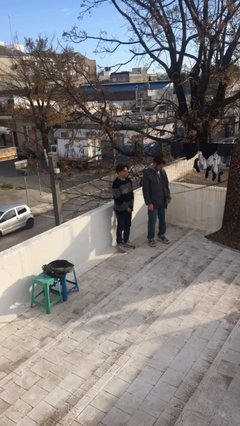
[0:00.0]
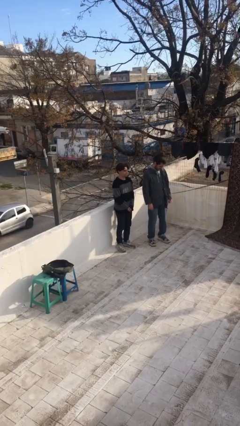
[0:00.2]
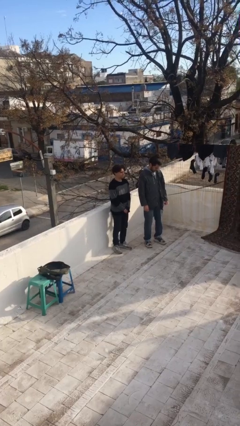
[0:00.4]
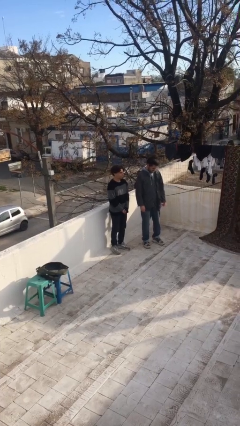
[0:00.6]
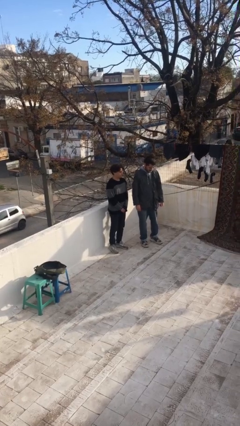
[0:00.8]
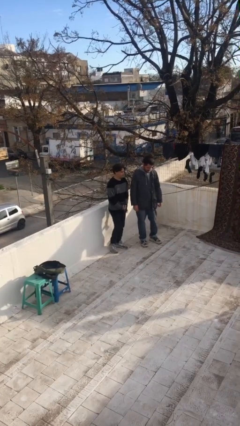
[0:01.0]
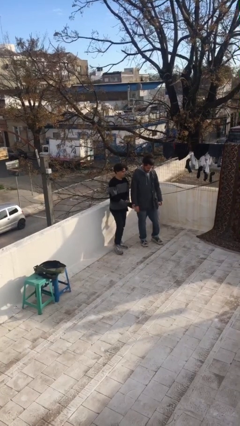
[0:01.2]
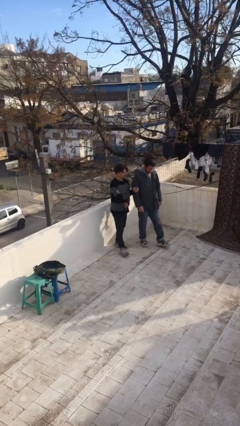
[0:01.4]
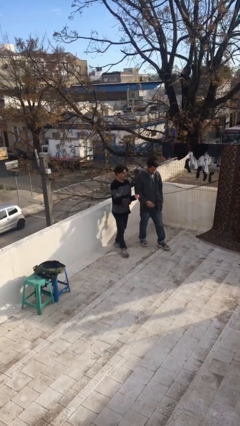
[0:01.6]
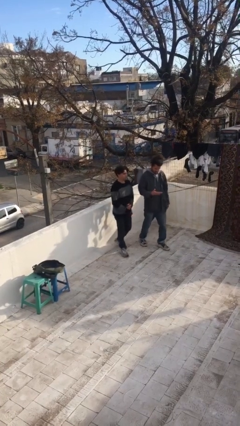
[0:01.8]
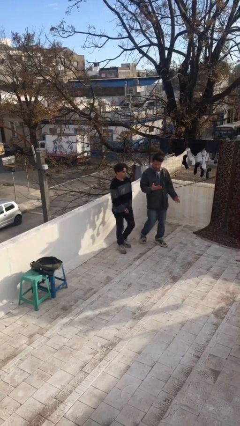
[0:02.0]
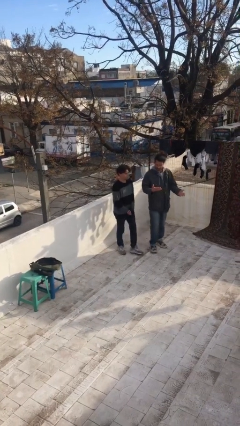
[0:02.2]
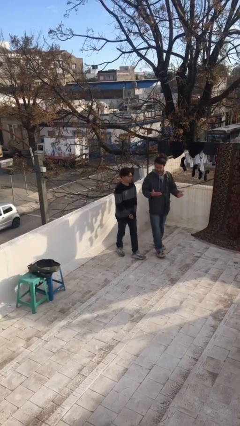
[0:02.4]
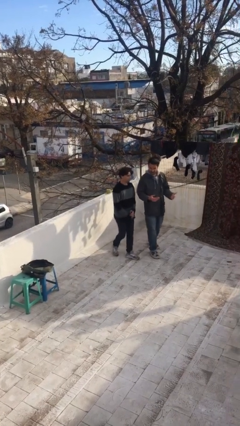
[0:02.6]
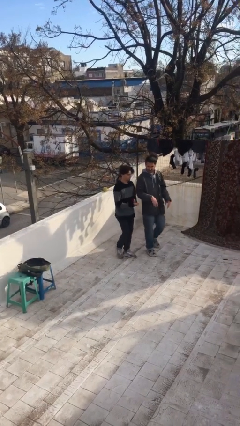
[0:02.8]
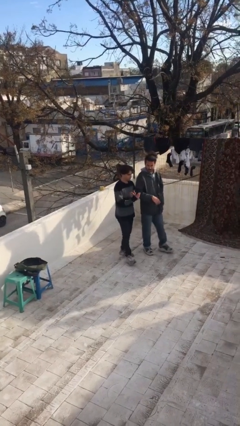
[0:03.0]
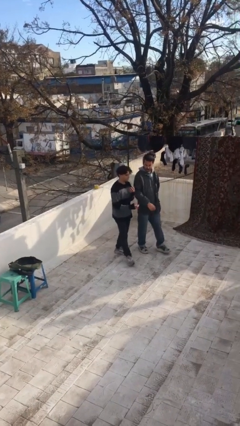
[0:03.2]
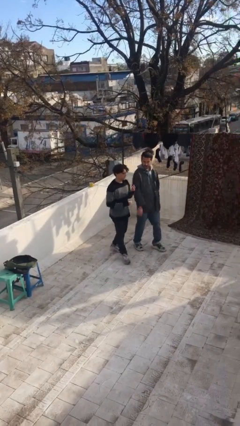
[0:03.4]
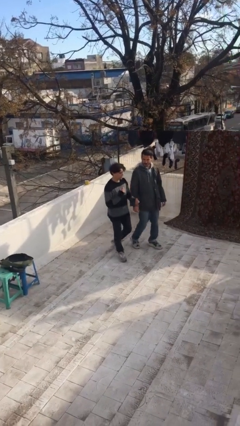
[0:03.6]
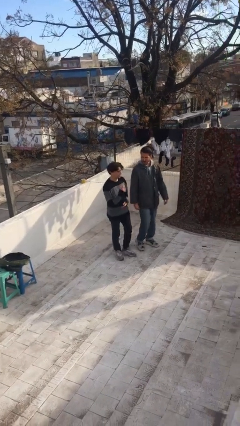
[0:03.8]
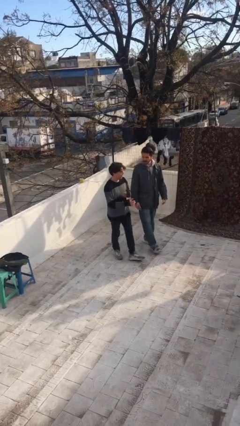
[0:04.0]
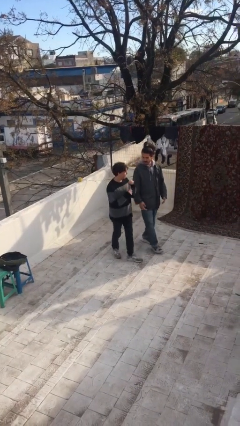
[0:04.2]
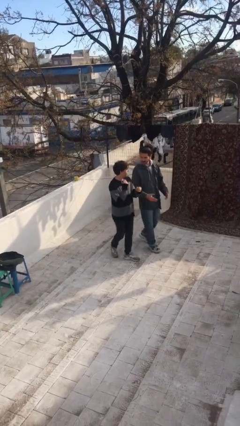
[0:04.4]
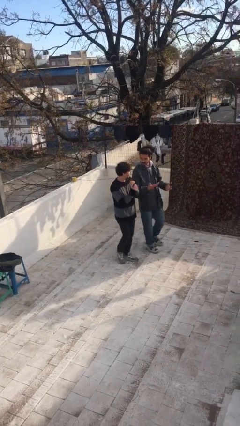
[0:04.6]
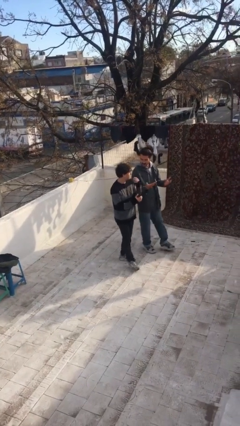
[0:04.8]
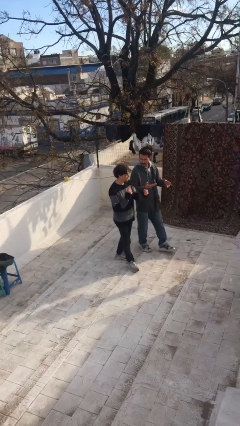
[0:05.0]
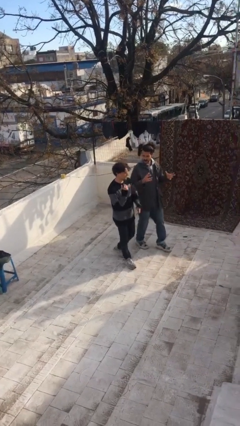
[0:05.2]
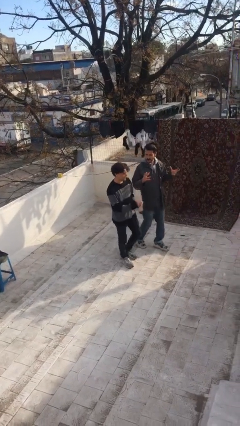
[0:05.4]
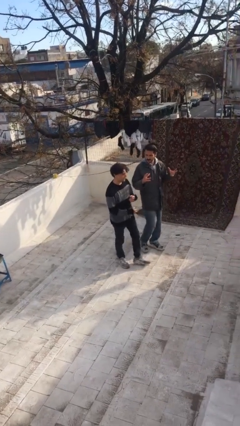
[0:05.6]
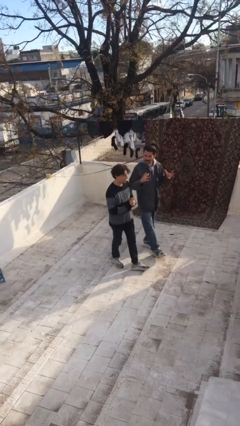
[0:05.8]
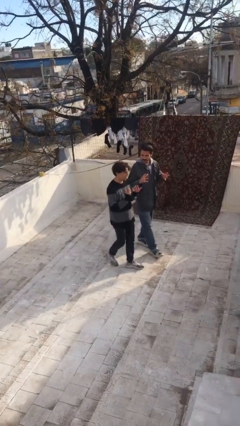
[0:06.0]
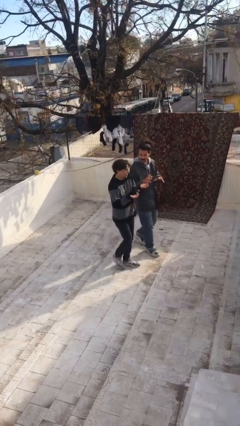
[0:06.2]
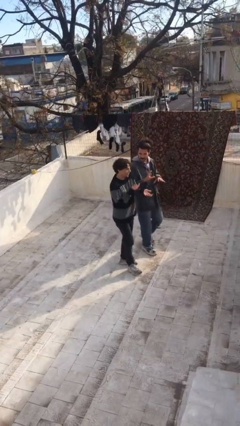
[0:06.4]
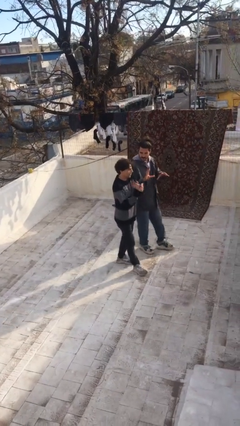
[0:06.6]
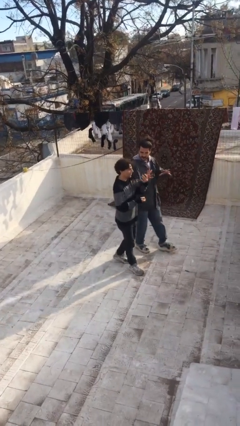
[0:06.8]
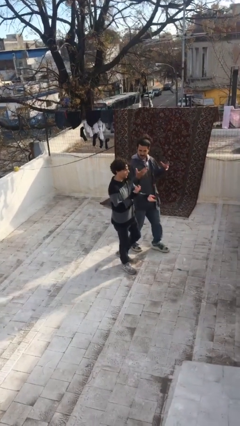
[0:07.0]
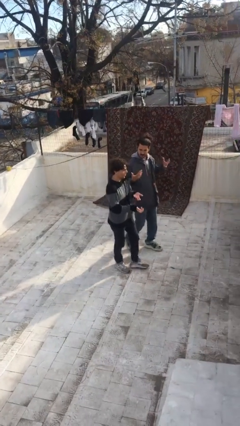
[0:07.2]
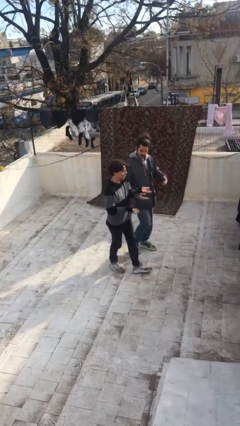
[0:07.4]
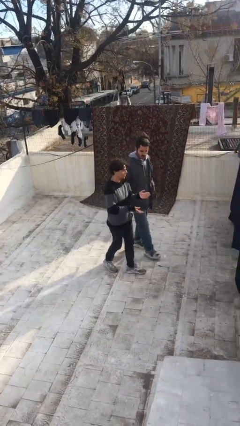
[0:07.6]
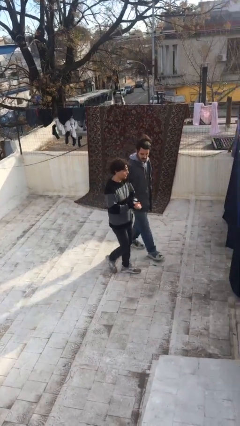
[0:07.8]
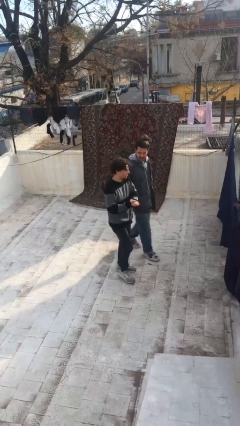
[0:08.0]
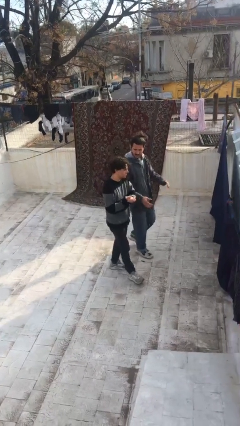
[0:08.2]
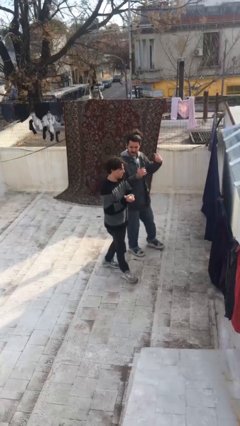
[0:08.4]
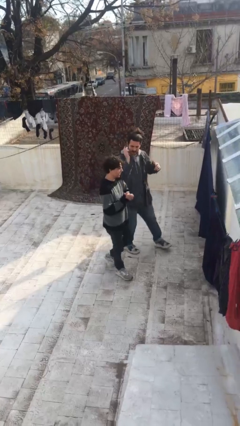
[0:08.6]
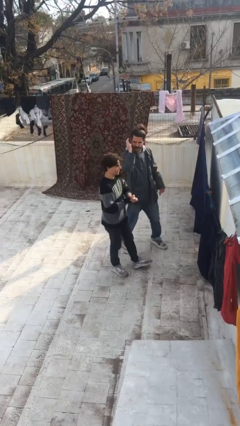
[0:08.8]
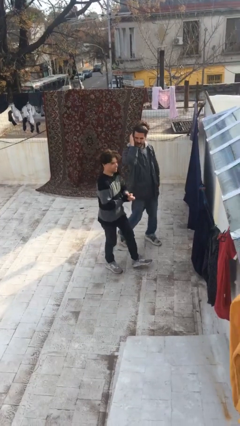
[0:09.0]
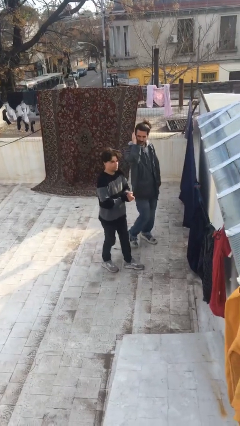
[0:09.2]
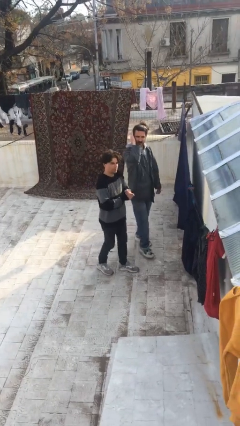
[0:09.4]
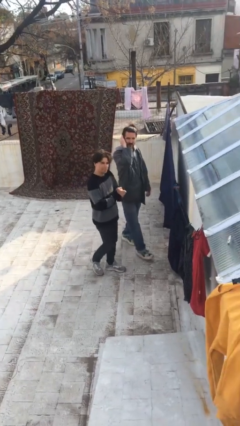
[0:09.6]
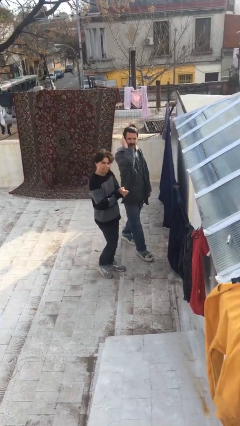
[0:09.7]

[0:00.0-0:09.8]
person talks to person

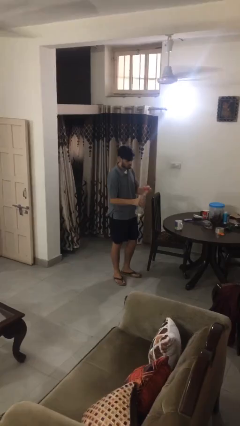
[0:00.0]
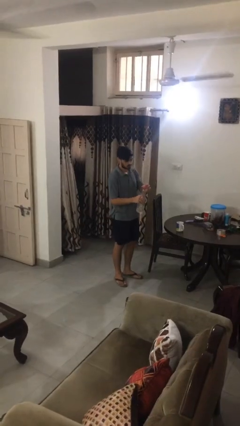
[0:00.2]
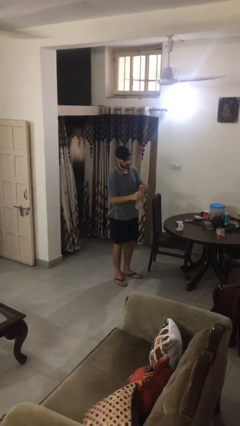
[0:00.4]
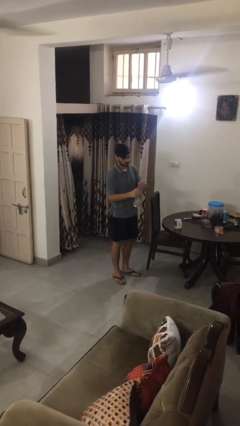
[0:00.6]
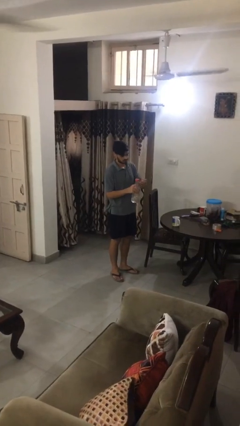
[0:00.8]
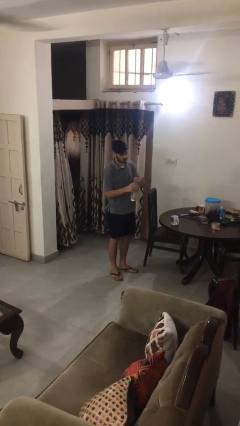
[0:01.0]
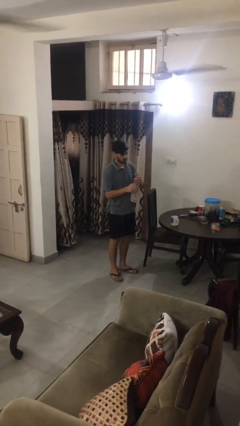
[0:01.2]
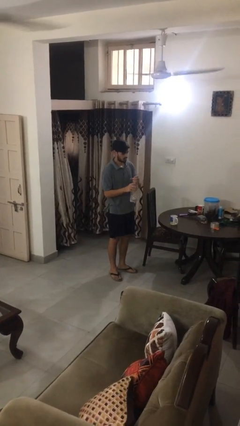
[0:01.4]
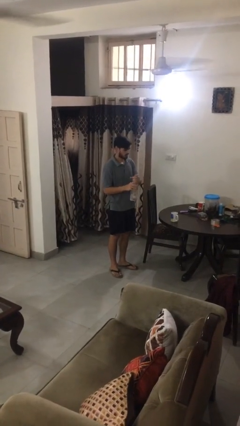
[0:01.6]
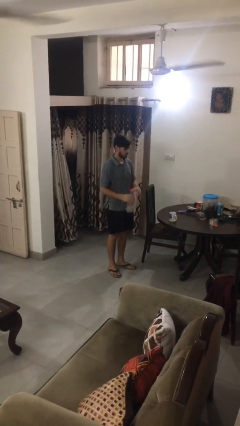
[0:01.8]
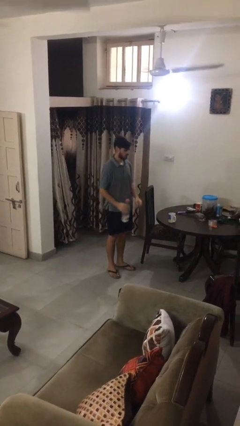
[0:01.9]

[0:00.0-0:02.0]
person screws lid to bottle

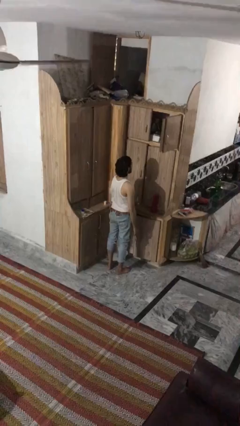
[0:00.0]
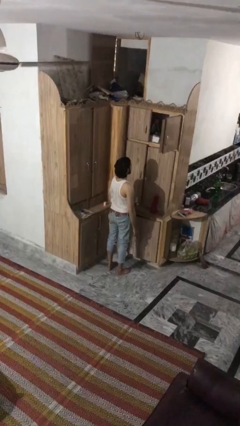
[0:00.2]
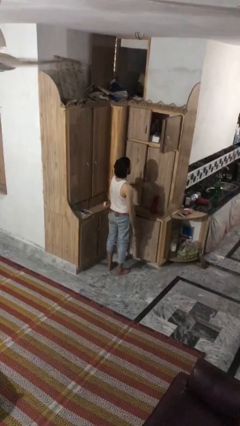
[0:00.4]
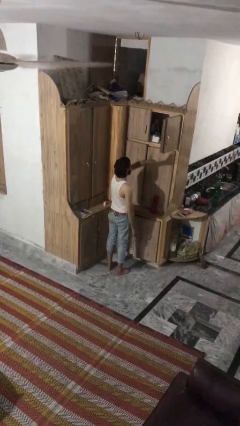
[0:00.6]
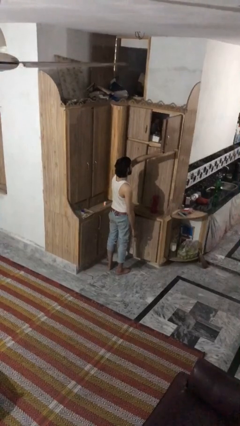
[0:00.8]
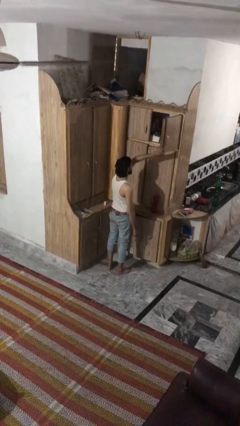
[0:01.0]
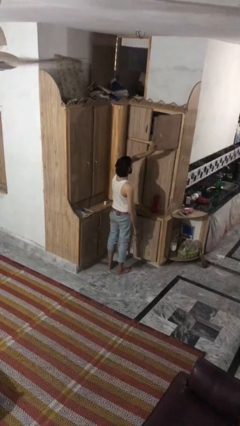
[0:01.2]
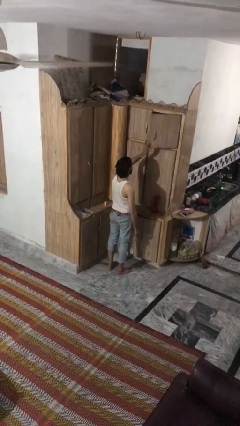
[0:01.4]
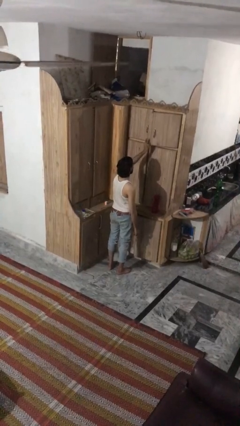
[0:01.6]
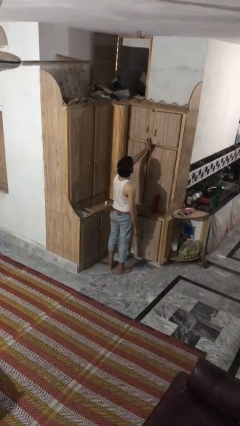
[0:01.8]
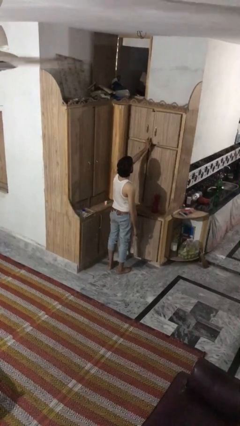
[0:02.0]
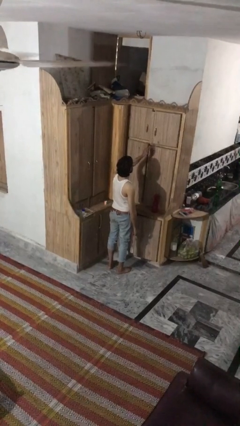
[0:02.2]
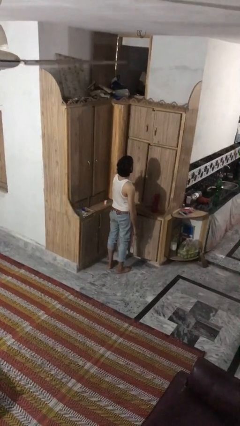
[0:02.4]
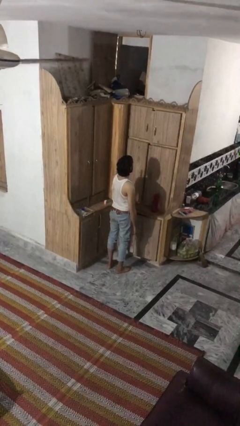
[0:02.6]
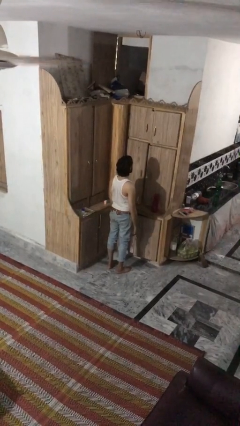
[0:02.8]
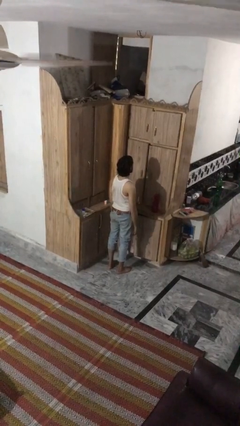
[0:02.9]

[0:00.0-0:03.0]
person closes cabinet

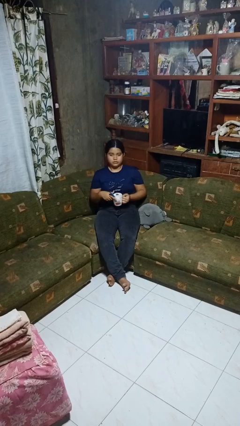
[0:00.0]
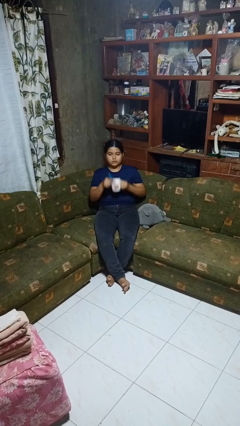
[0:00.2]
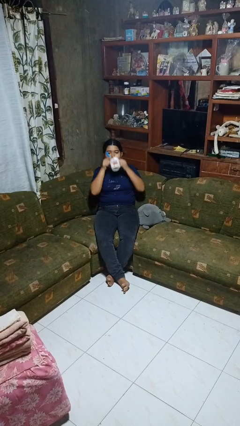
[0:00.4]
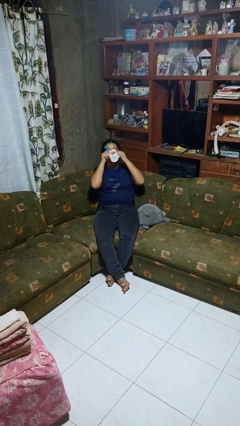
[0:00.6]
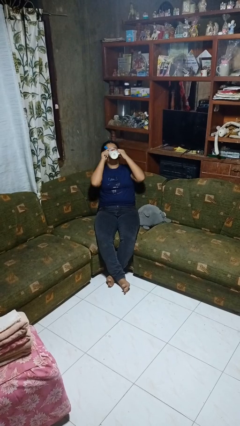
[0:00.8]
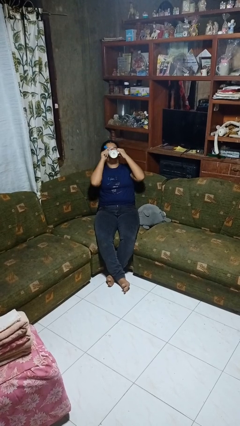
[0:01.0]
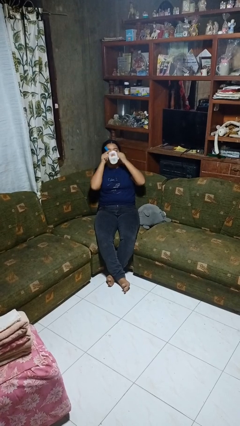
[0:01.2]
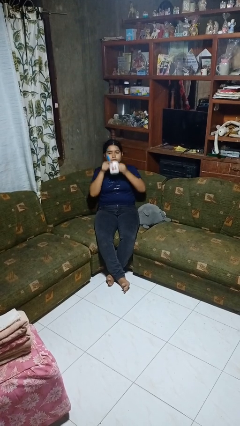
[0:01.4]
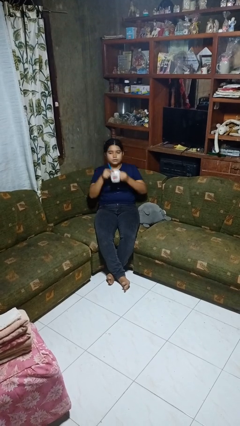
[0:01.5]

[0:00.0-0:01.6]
person drinks from mug

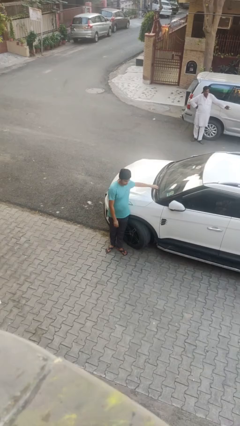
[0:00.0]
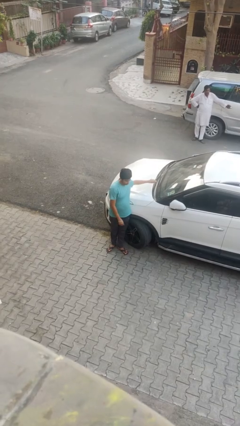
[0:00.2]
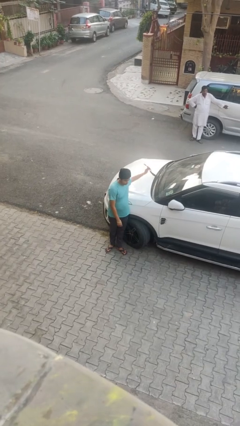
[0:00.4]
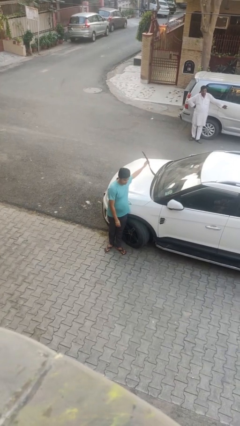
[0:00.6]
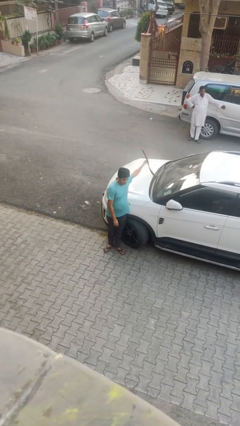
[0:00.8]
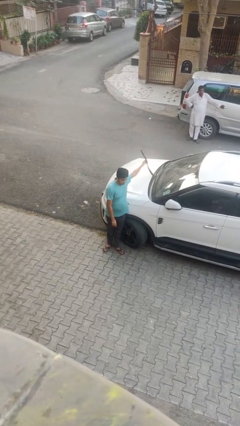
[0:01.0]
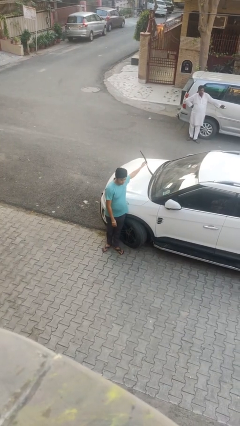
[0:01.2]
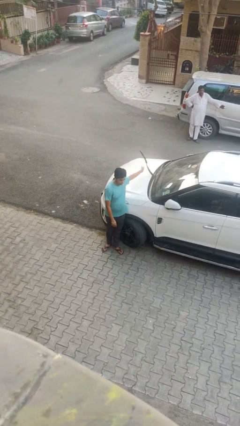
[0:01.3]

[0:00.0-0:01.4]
person flips up car wipers
